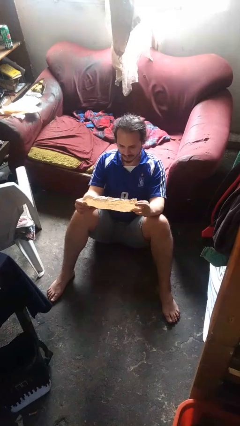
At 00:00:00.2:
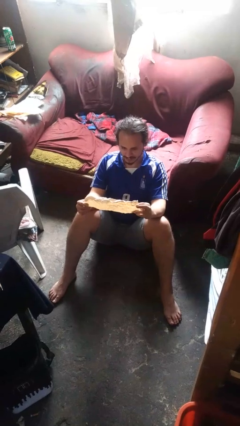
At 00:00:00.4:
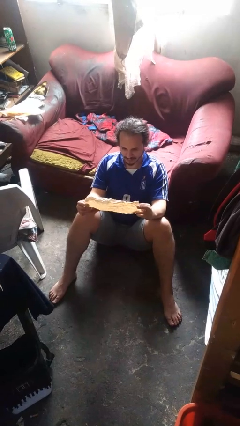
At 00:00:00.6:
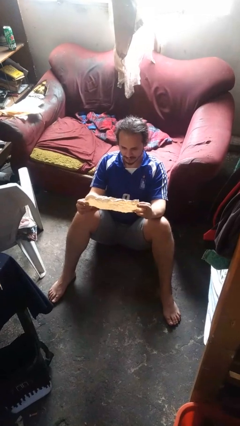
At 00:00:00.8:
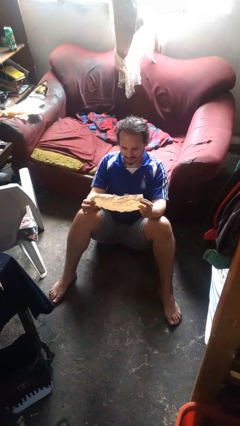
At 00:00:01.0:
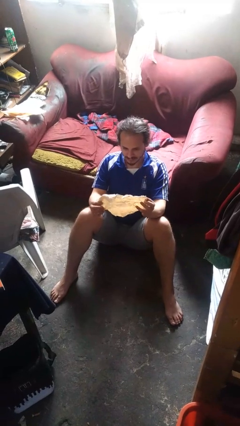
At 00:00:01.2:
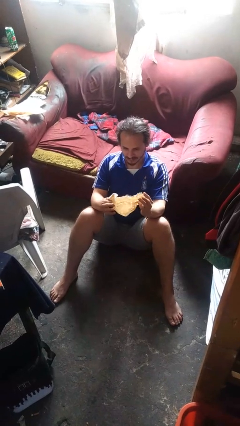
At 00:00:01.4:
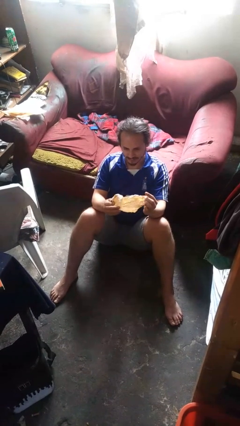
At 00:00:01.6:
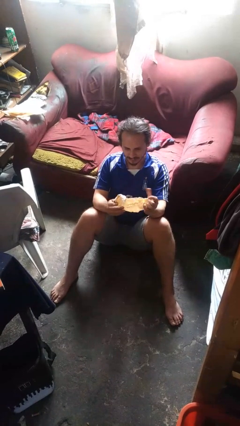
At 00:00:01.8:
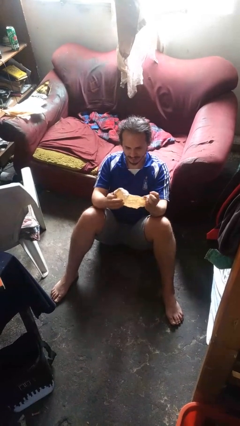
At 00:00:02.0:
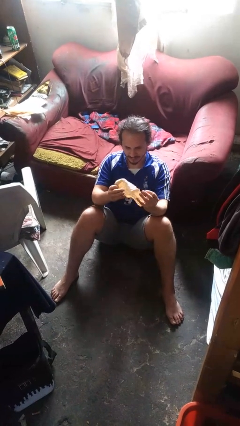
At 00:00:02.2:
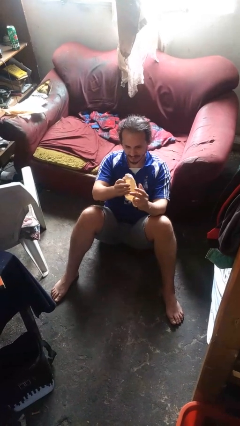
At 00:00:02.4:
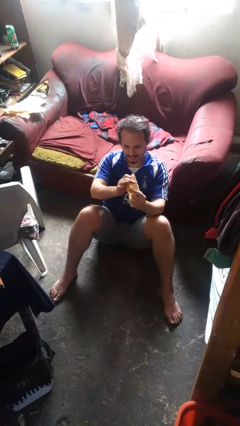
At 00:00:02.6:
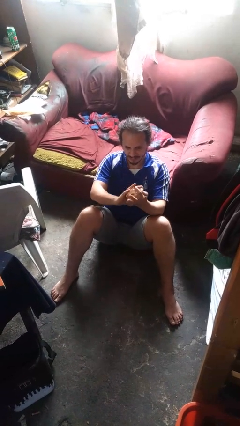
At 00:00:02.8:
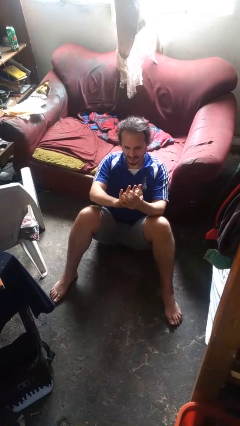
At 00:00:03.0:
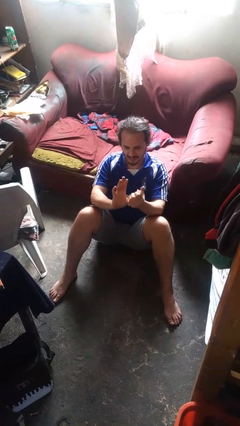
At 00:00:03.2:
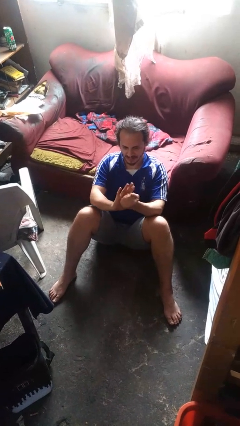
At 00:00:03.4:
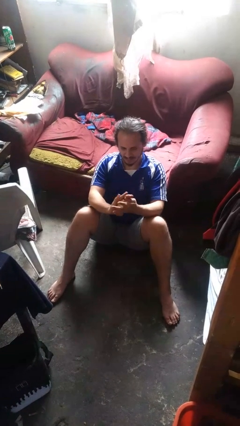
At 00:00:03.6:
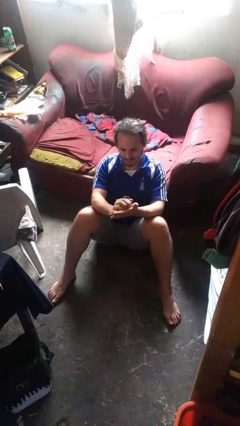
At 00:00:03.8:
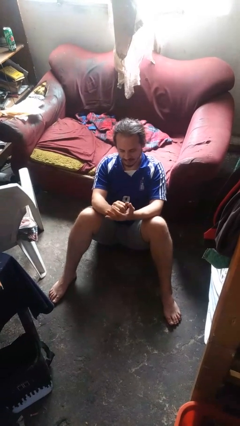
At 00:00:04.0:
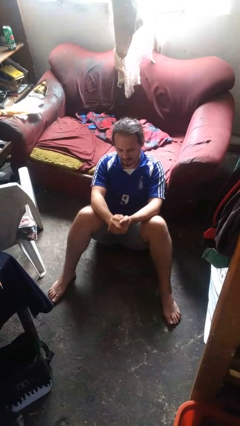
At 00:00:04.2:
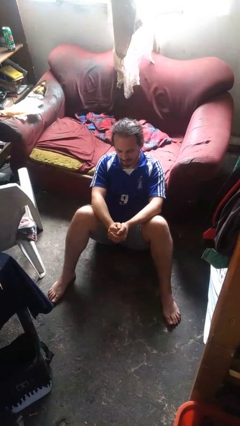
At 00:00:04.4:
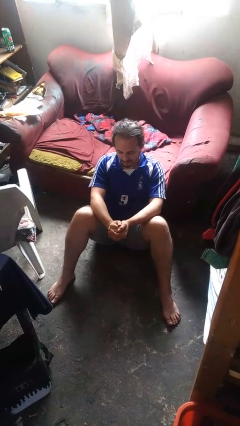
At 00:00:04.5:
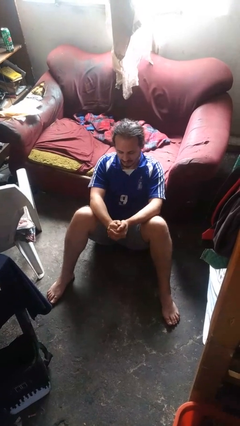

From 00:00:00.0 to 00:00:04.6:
person crumples paper

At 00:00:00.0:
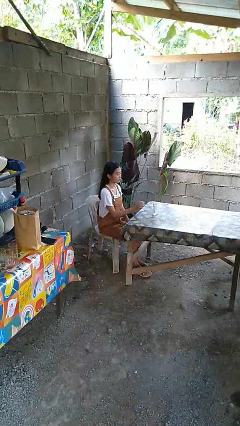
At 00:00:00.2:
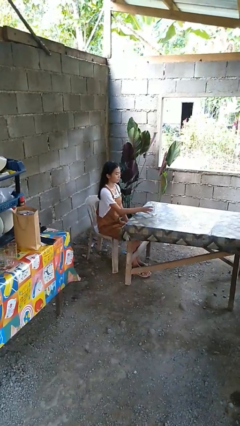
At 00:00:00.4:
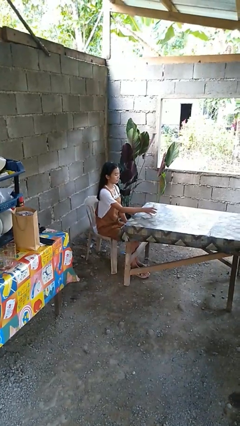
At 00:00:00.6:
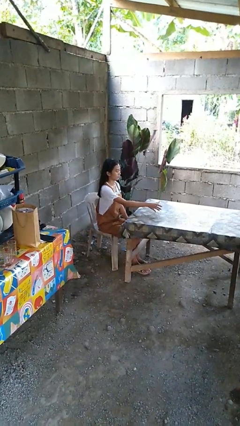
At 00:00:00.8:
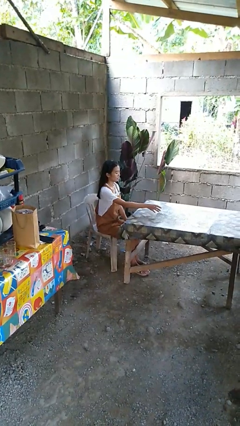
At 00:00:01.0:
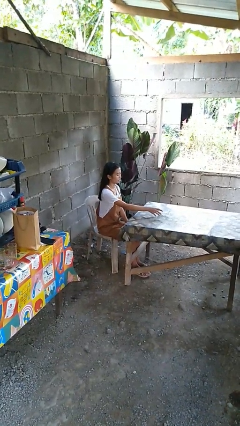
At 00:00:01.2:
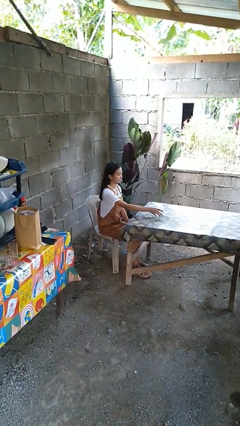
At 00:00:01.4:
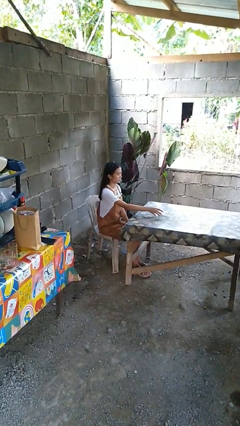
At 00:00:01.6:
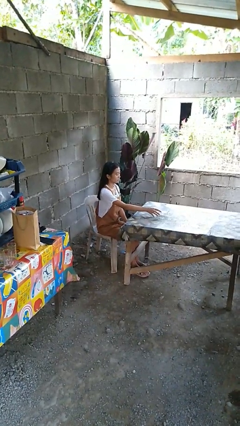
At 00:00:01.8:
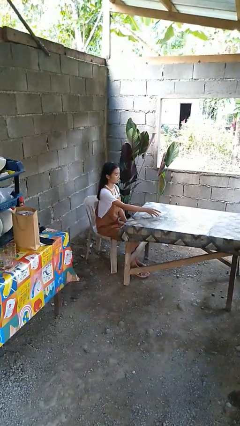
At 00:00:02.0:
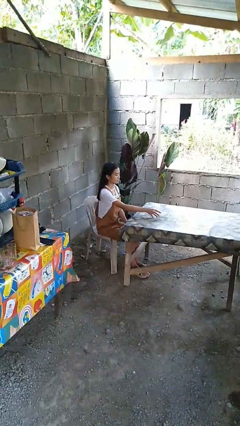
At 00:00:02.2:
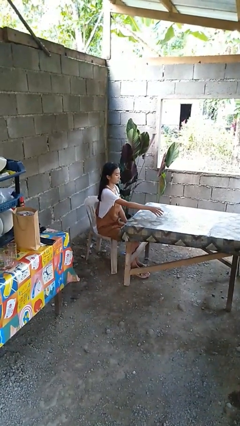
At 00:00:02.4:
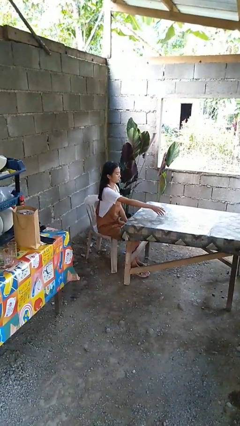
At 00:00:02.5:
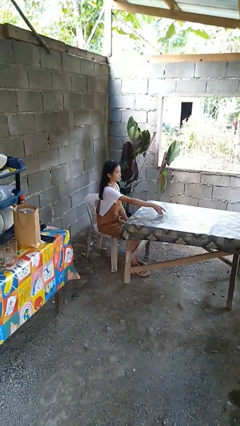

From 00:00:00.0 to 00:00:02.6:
person knocks over glass

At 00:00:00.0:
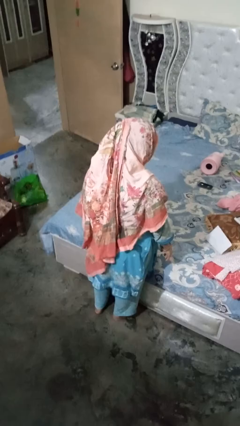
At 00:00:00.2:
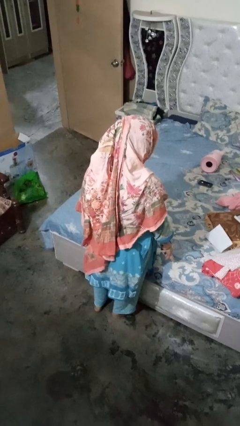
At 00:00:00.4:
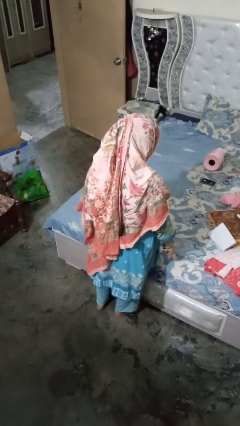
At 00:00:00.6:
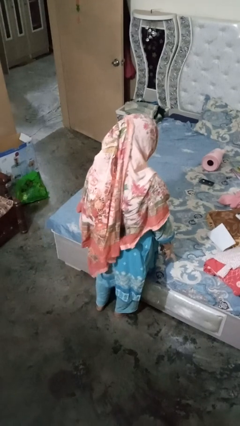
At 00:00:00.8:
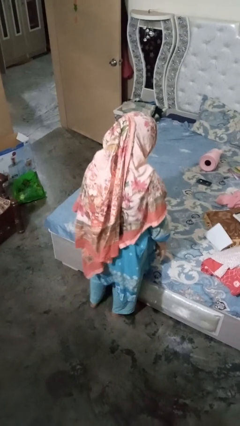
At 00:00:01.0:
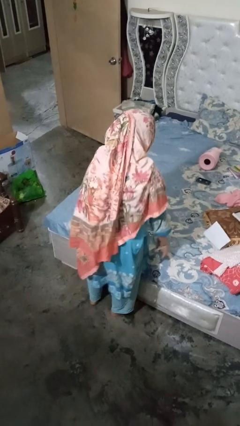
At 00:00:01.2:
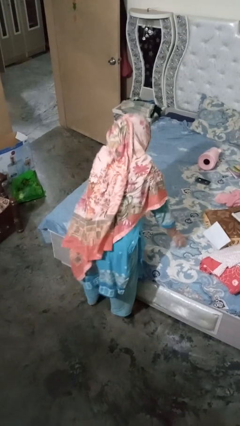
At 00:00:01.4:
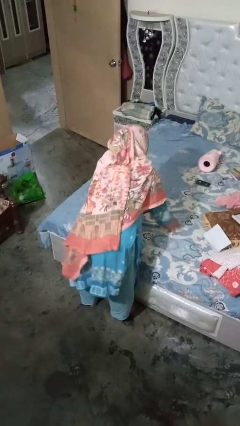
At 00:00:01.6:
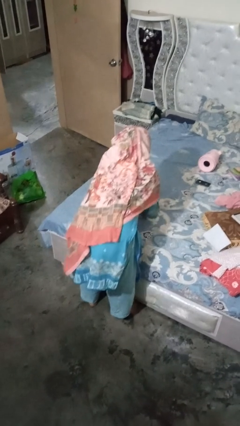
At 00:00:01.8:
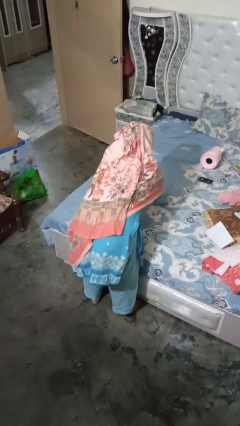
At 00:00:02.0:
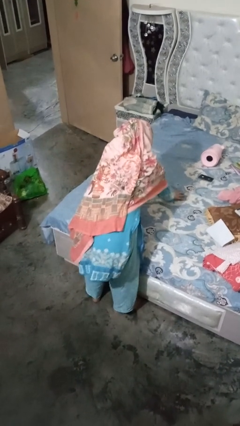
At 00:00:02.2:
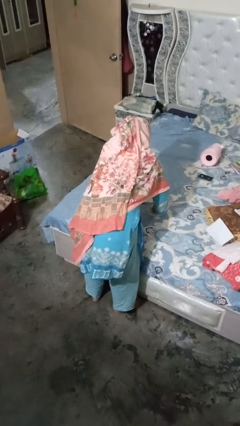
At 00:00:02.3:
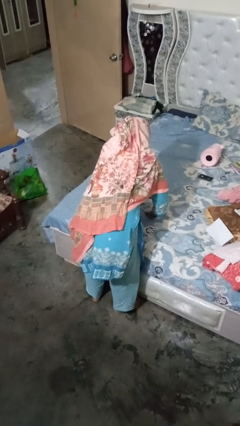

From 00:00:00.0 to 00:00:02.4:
person searches under bed

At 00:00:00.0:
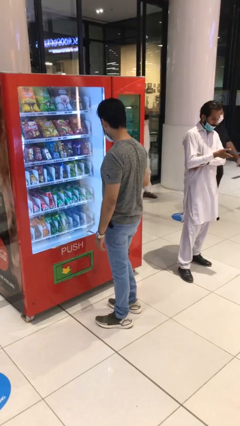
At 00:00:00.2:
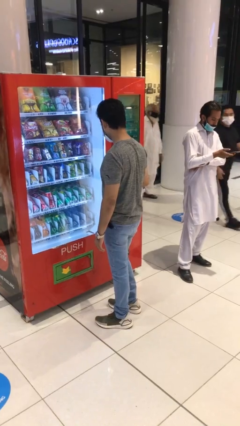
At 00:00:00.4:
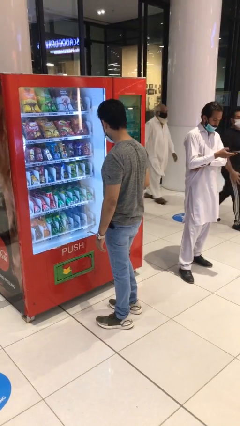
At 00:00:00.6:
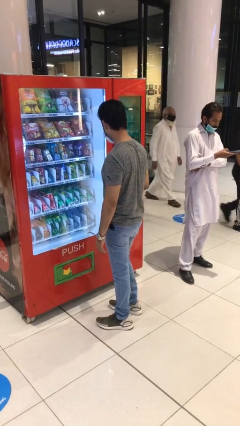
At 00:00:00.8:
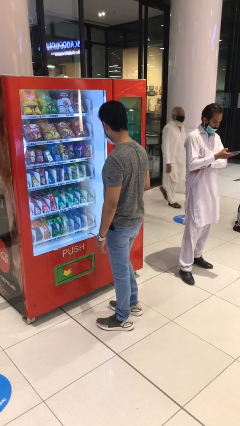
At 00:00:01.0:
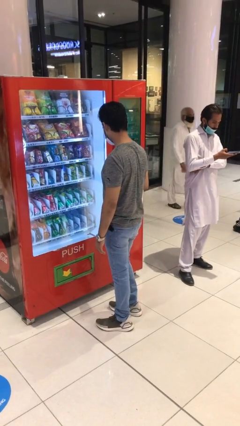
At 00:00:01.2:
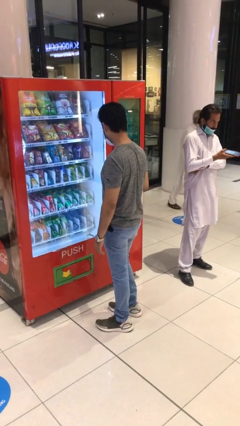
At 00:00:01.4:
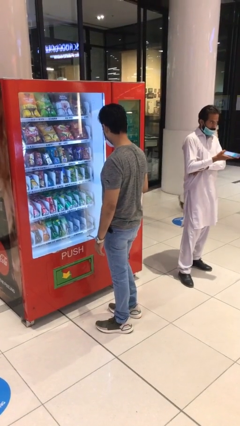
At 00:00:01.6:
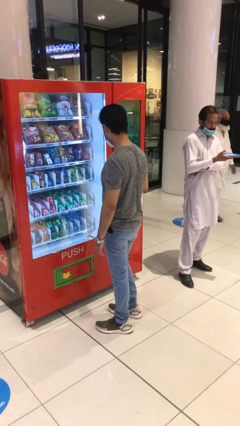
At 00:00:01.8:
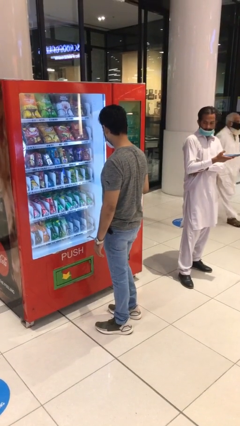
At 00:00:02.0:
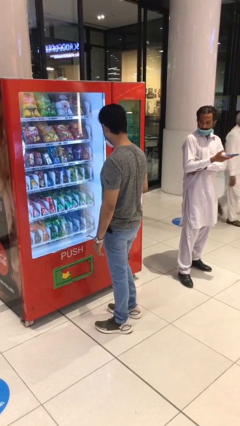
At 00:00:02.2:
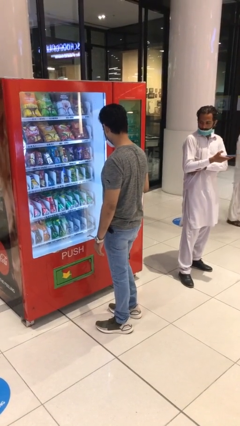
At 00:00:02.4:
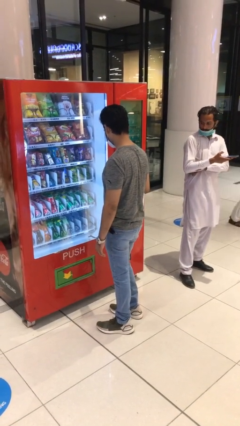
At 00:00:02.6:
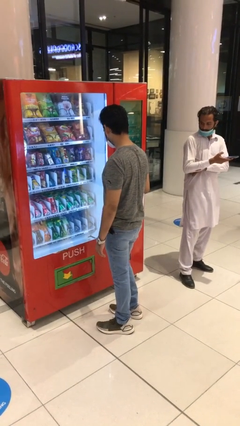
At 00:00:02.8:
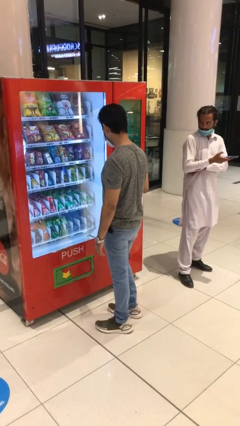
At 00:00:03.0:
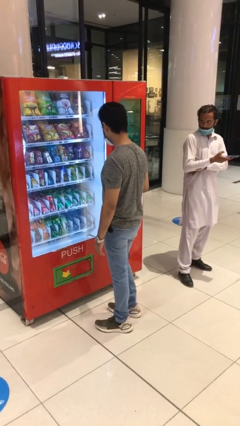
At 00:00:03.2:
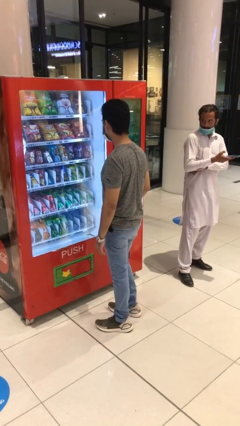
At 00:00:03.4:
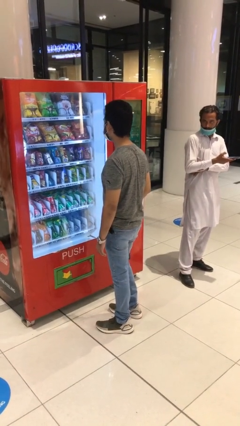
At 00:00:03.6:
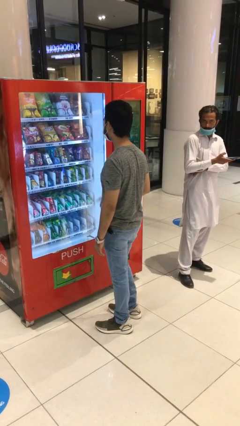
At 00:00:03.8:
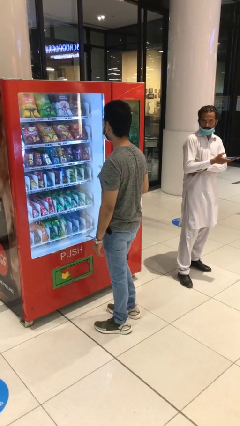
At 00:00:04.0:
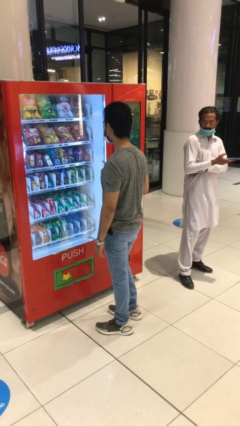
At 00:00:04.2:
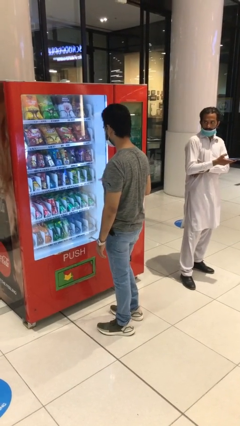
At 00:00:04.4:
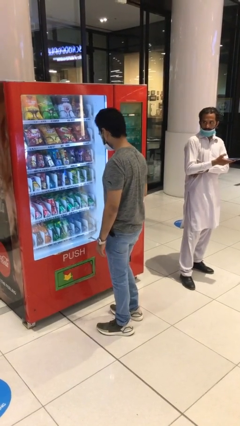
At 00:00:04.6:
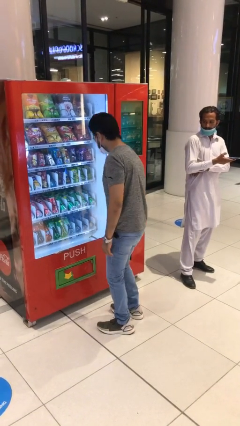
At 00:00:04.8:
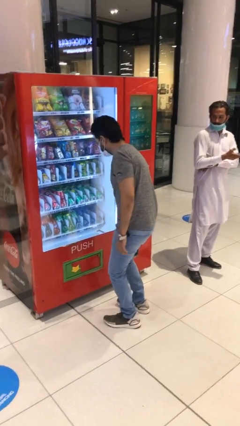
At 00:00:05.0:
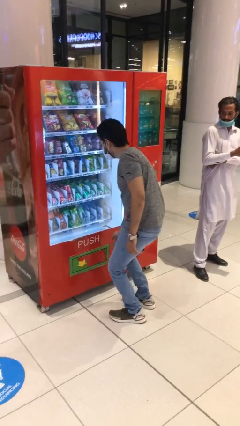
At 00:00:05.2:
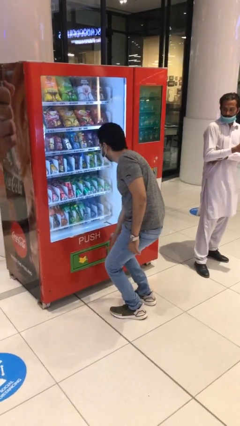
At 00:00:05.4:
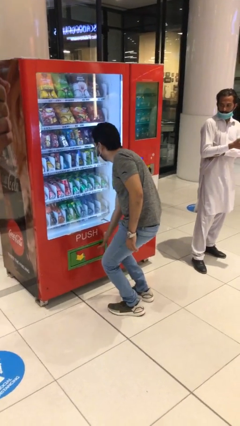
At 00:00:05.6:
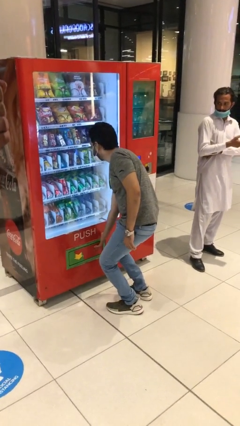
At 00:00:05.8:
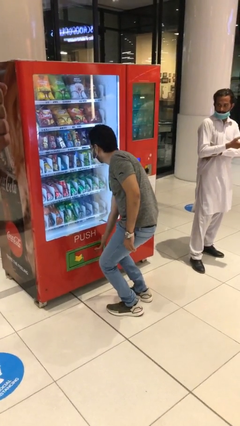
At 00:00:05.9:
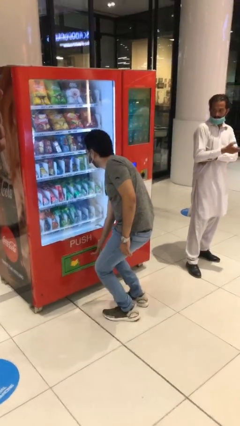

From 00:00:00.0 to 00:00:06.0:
person purchases from machine

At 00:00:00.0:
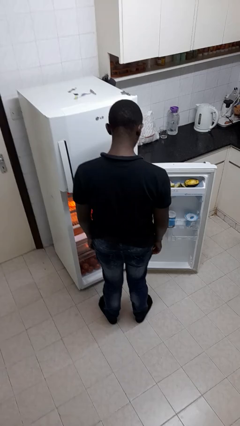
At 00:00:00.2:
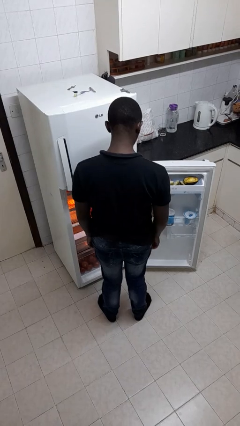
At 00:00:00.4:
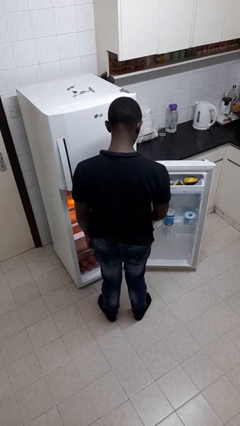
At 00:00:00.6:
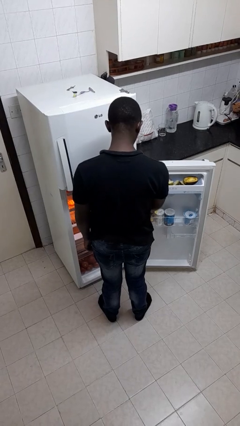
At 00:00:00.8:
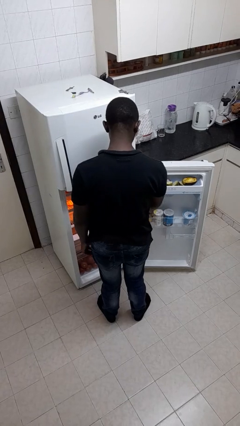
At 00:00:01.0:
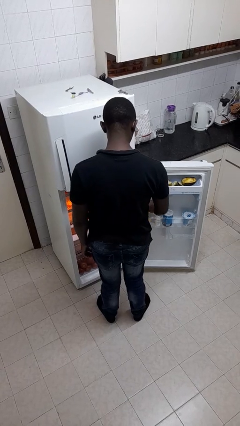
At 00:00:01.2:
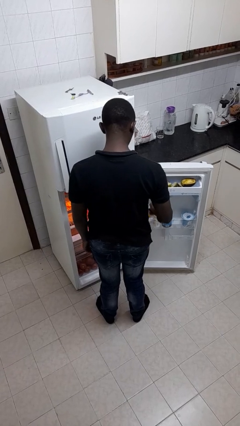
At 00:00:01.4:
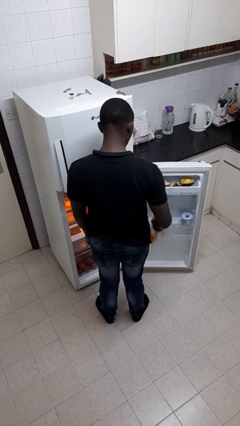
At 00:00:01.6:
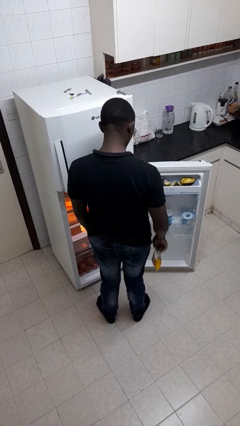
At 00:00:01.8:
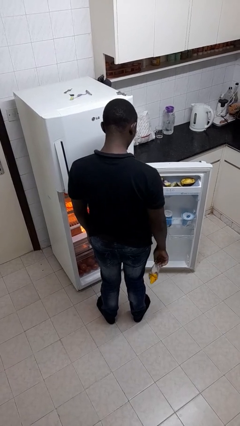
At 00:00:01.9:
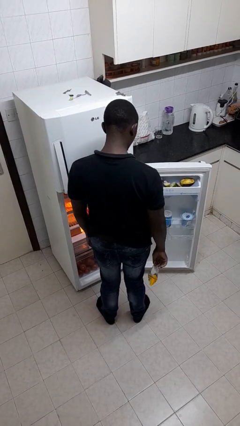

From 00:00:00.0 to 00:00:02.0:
person takes object from refrigerator
